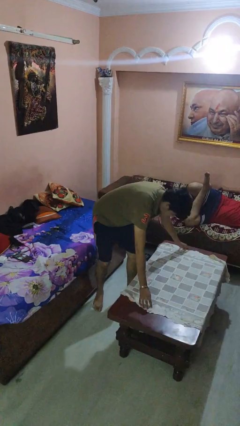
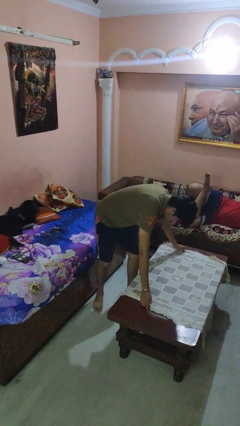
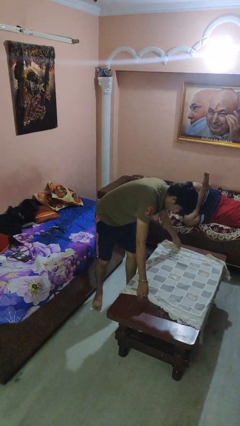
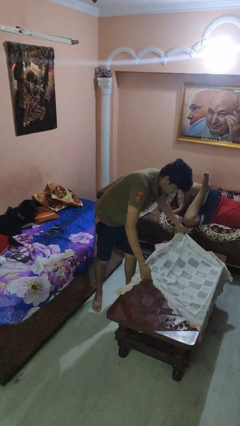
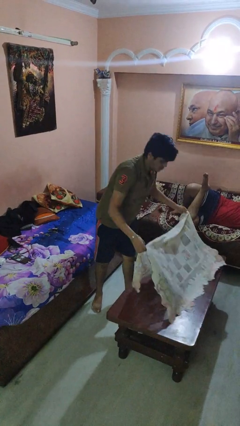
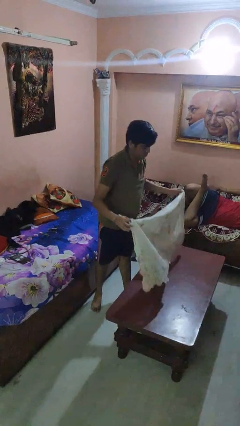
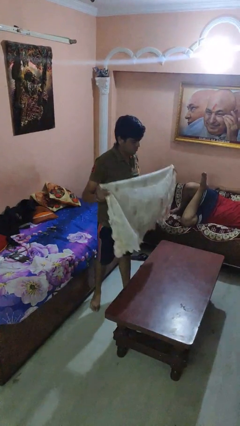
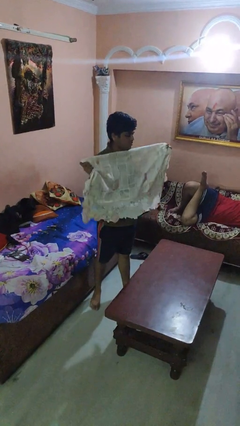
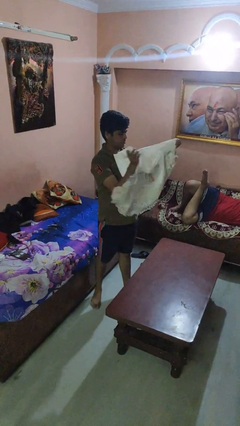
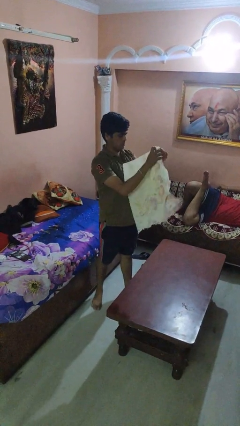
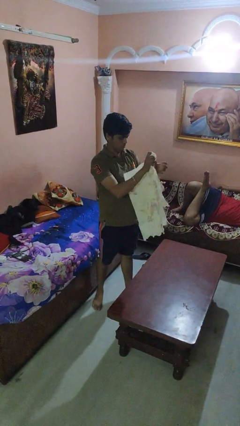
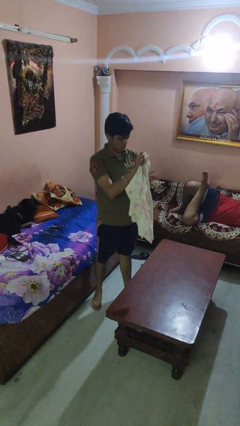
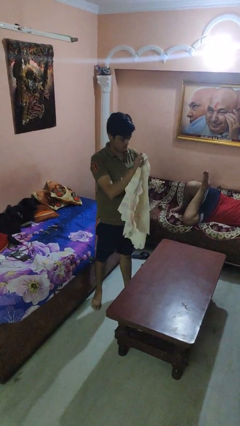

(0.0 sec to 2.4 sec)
person folds tablecloth

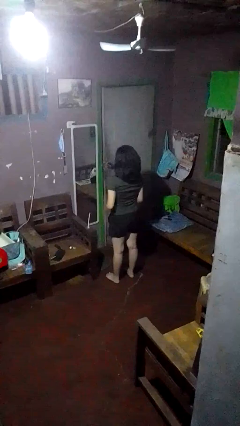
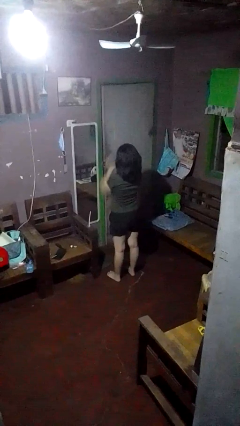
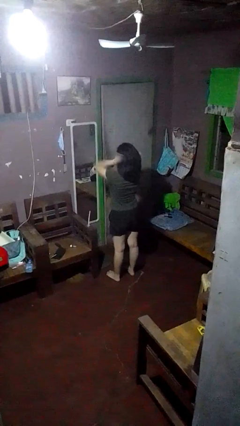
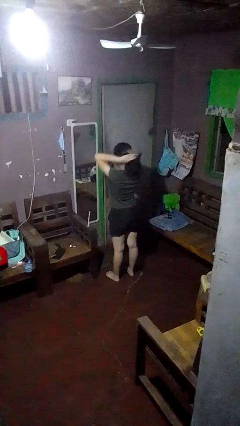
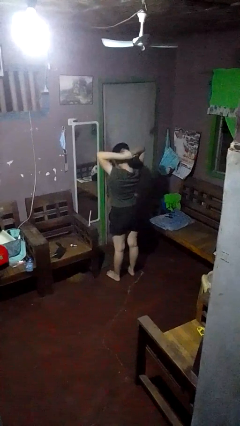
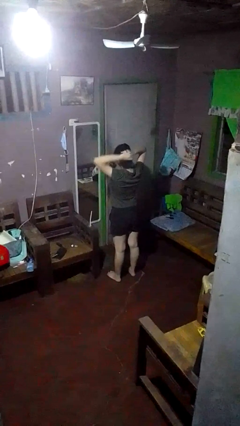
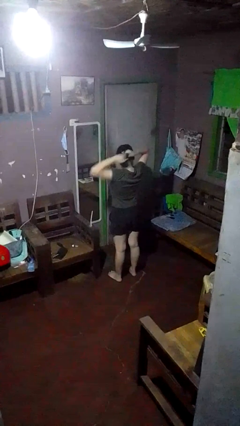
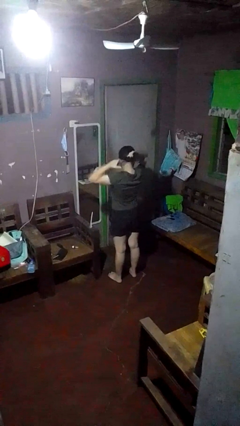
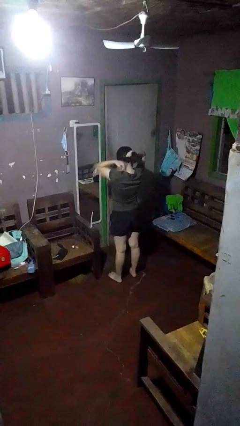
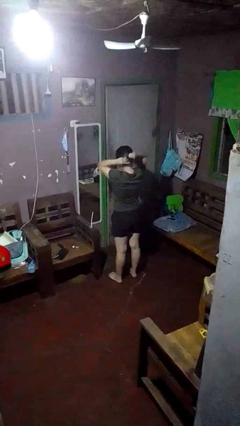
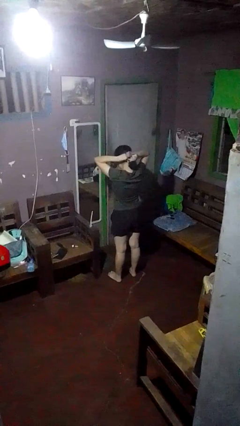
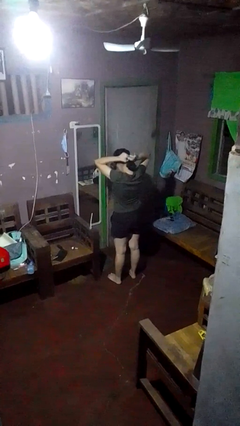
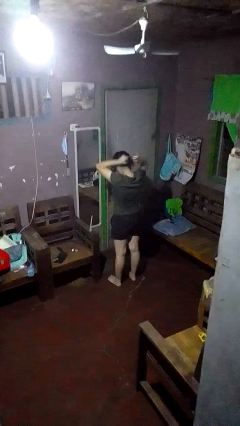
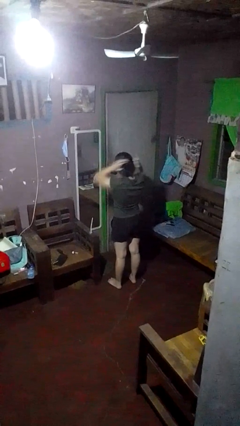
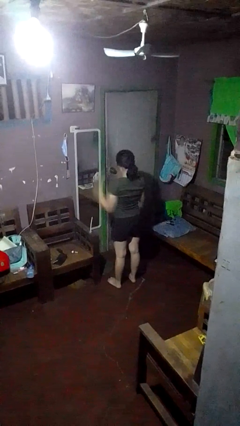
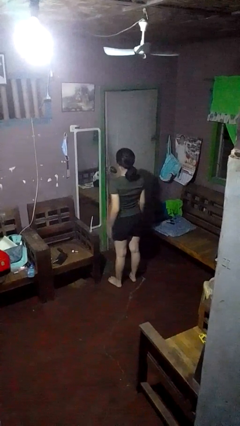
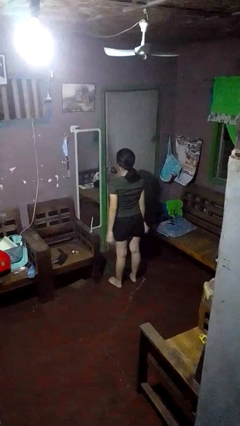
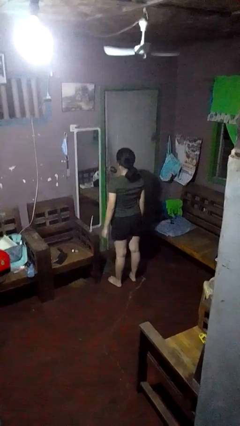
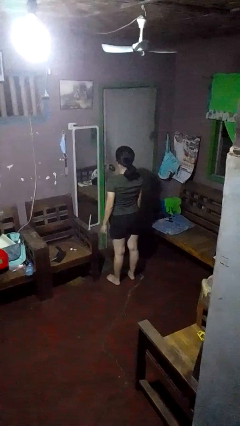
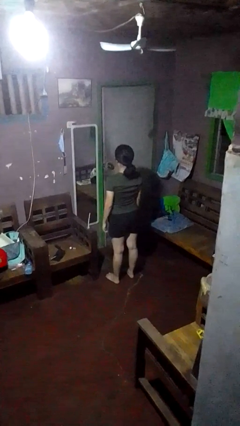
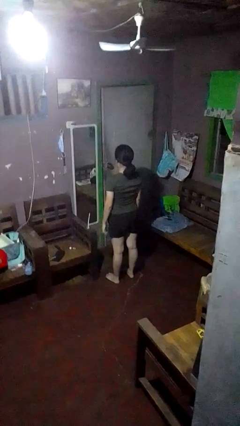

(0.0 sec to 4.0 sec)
person puts hair in ponytail

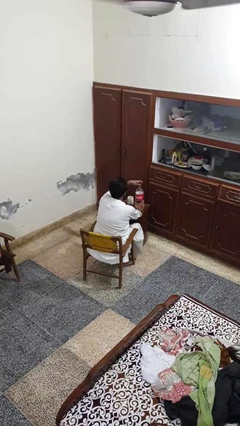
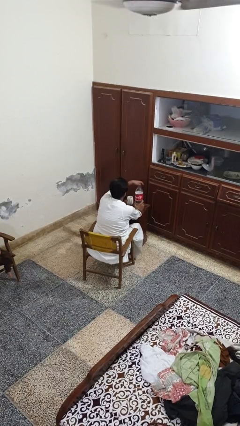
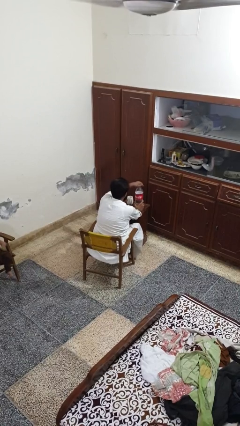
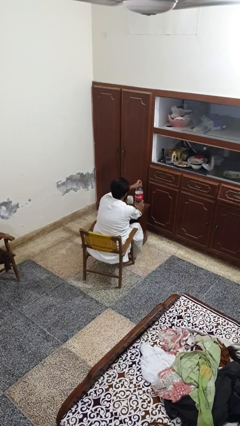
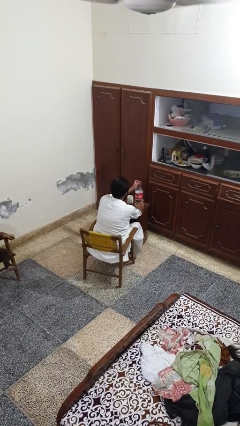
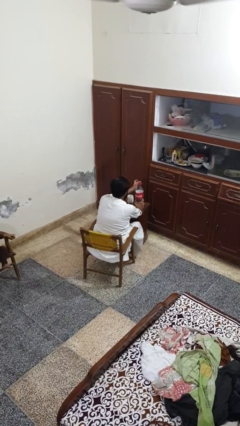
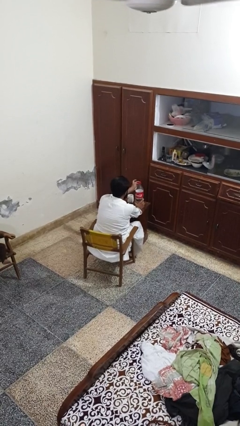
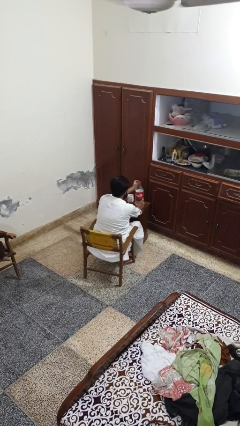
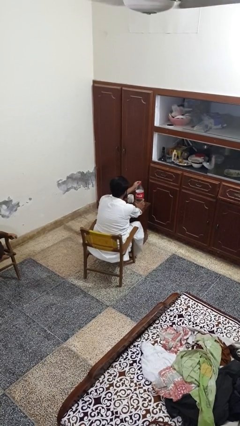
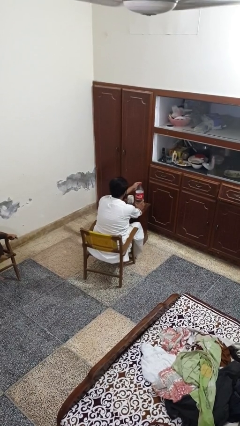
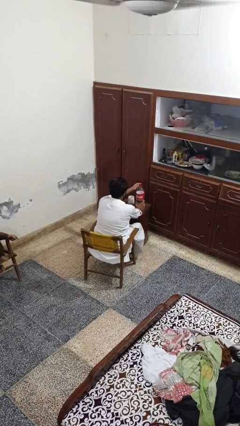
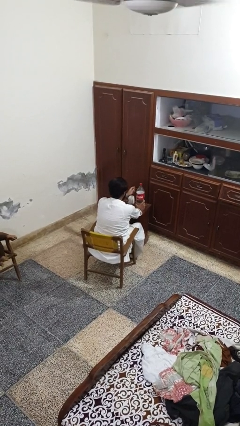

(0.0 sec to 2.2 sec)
person screws lid to bottle

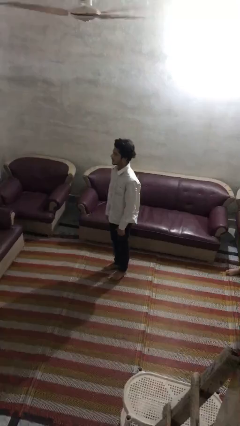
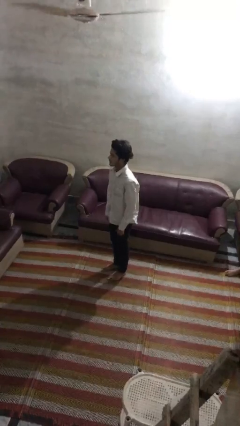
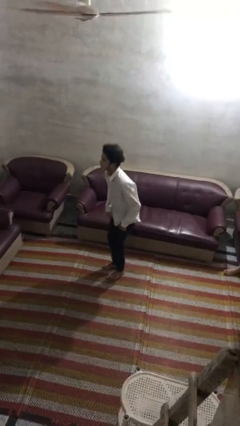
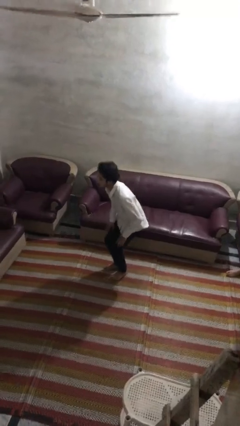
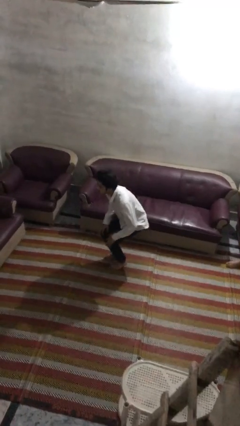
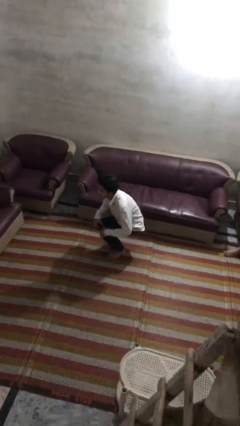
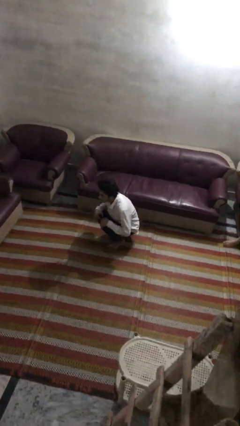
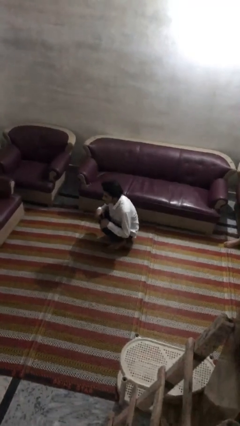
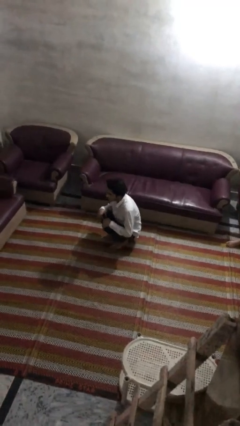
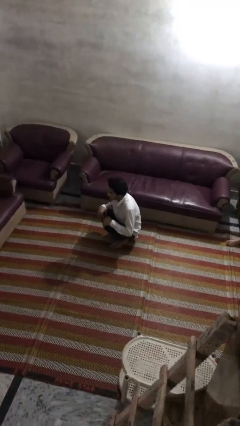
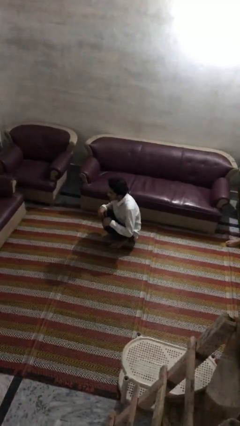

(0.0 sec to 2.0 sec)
person squats

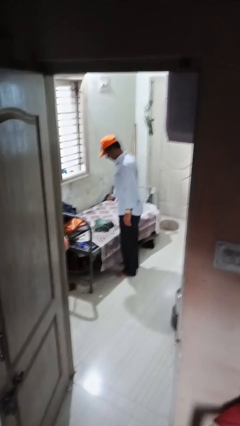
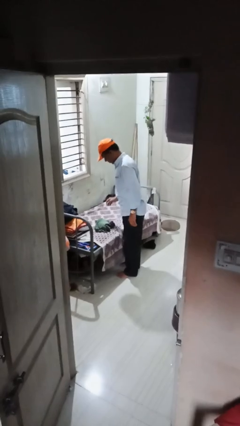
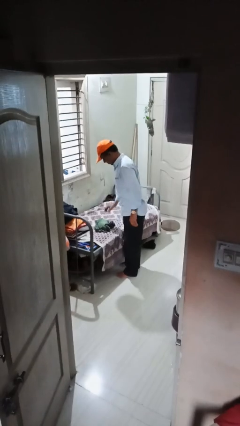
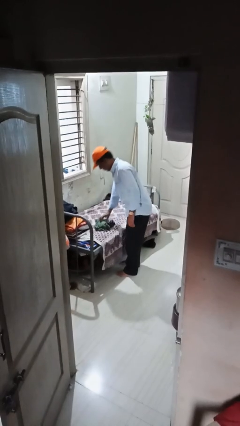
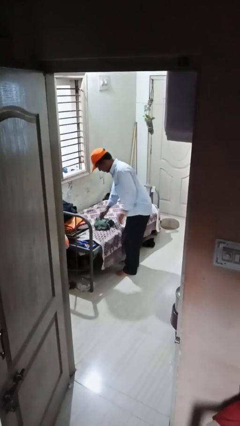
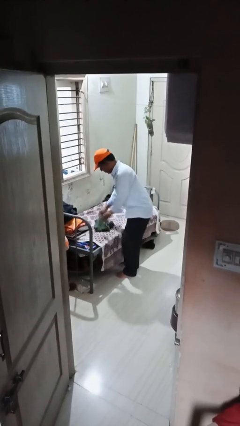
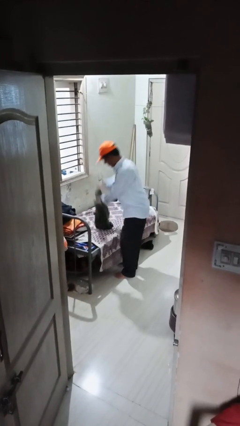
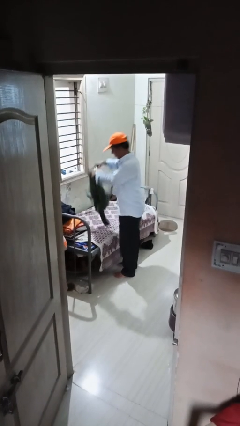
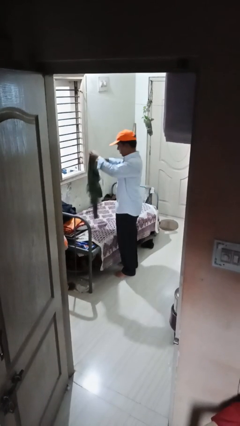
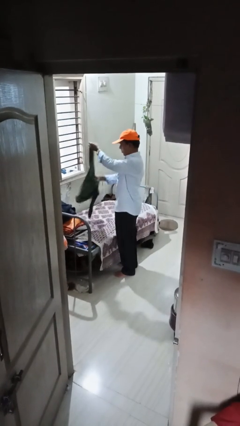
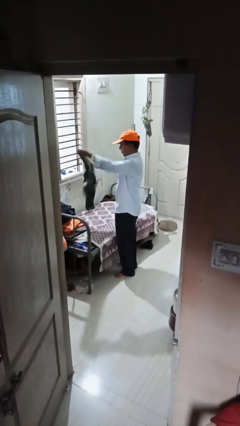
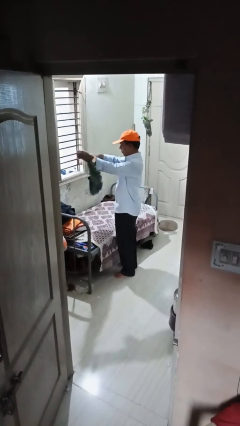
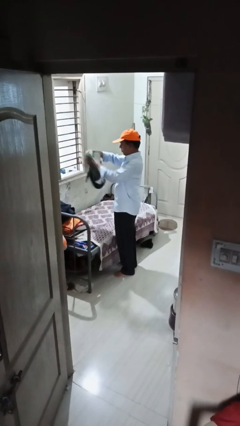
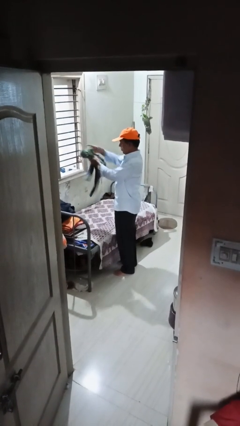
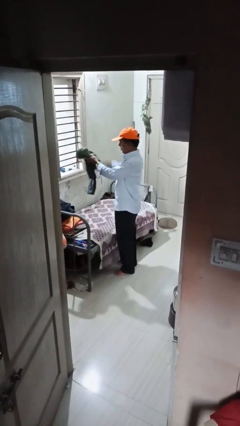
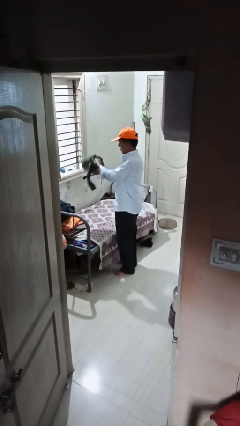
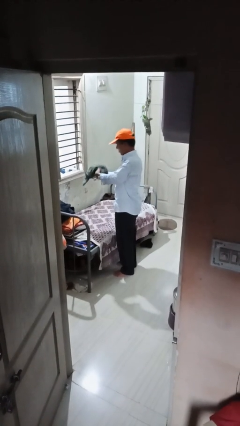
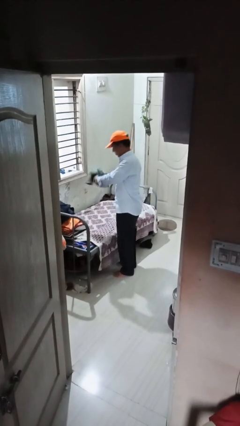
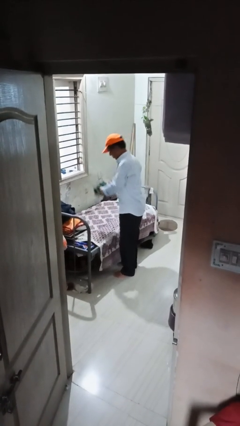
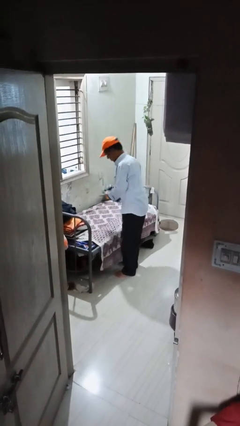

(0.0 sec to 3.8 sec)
person folds shirt

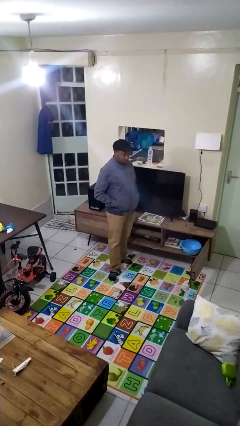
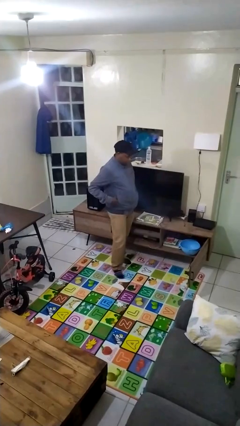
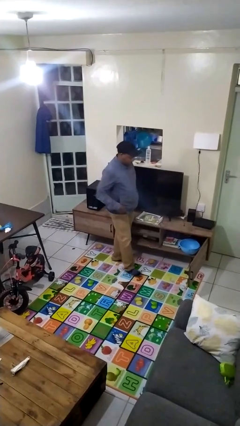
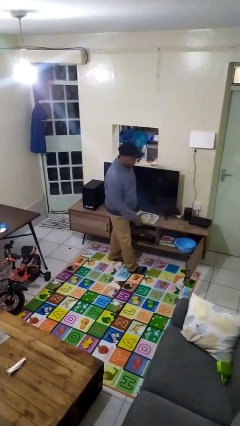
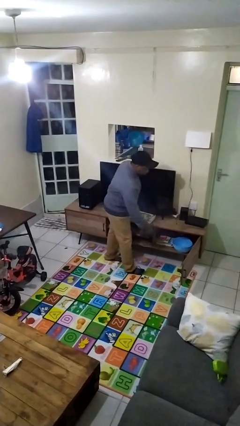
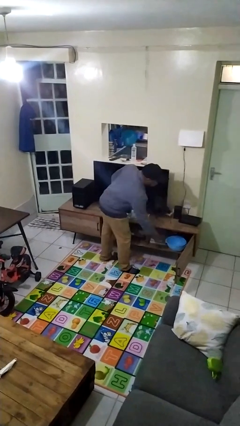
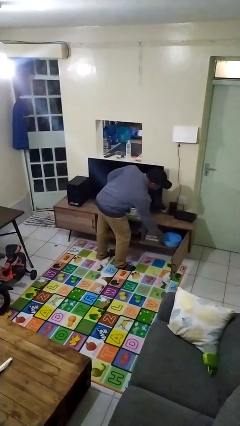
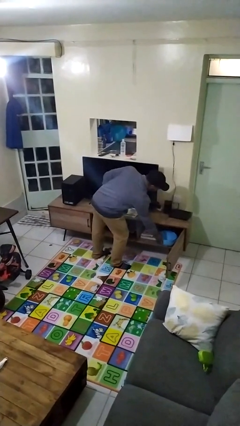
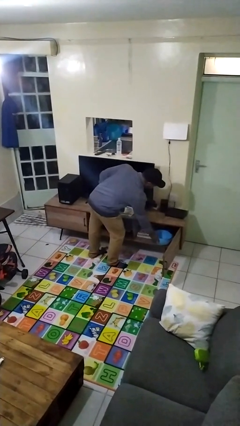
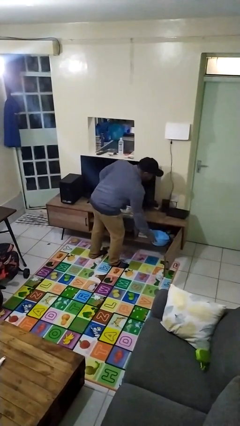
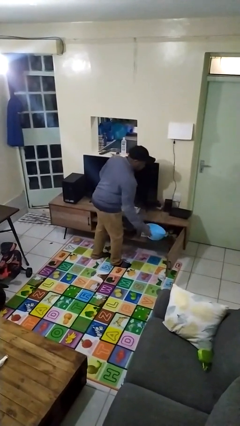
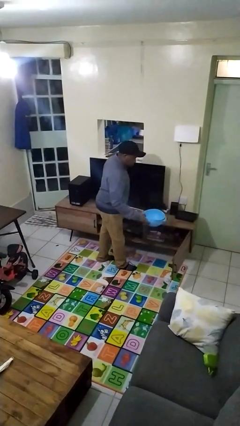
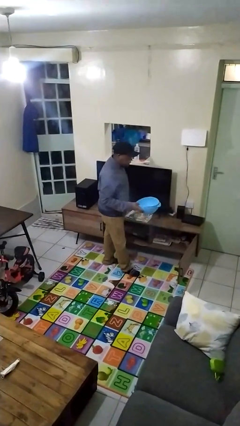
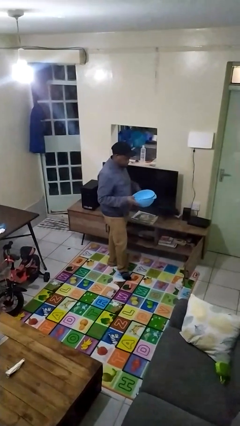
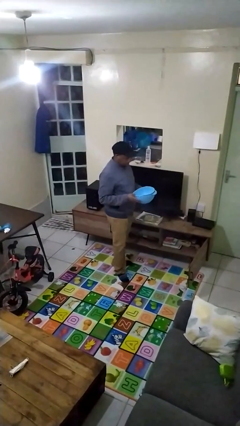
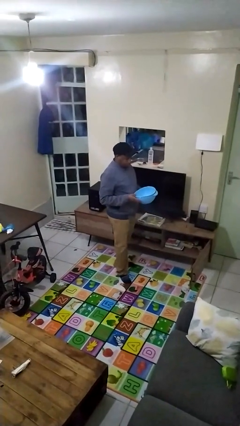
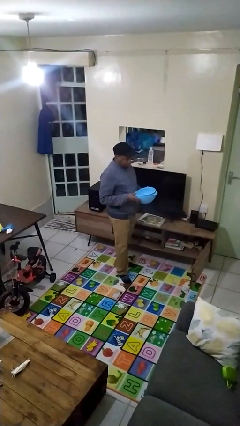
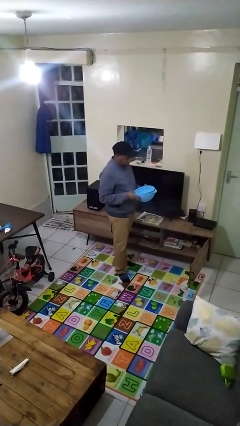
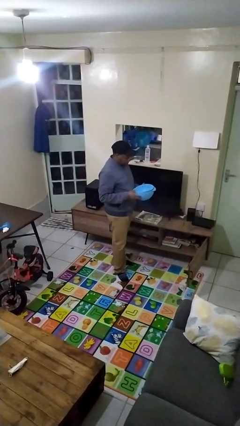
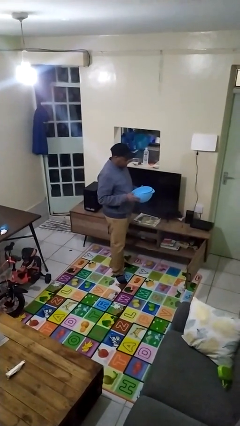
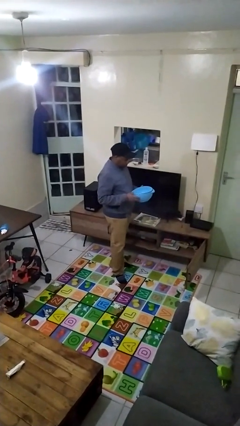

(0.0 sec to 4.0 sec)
person picks up object from cabinet
